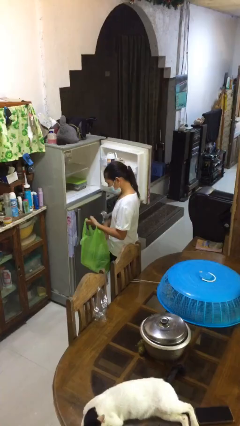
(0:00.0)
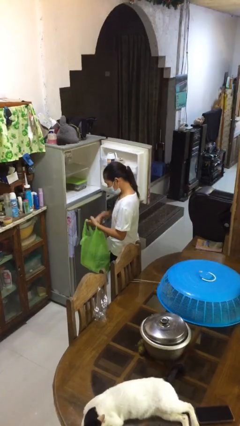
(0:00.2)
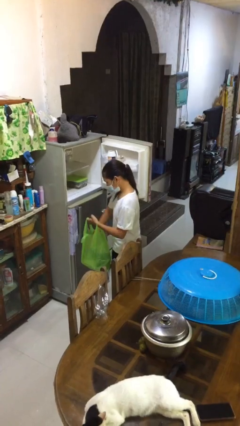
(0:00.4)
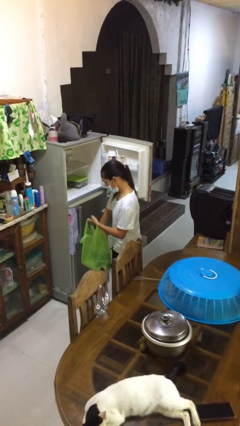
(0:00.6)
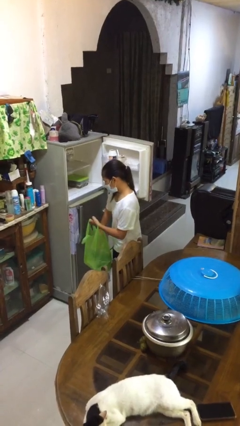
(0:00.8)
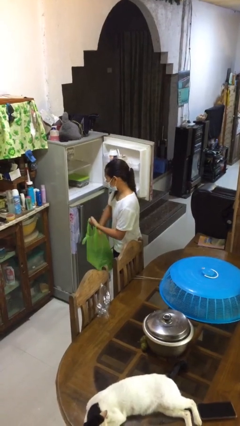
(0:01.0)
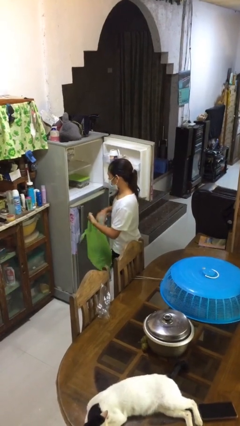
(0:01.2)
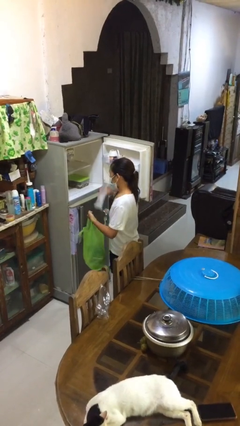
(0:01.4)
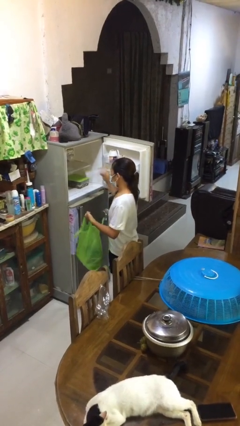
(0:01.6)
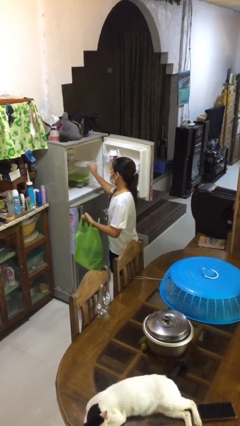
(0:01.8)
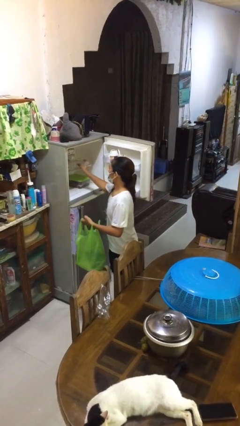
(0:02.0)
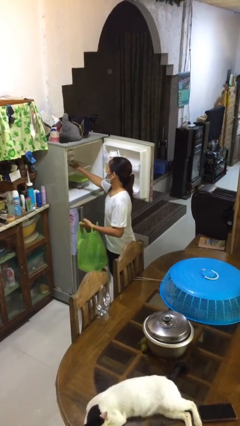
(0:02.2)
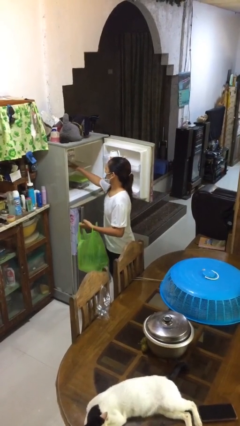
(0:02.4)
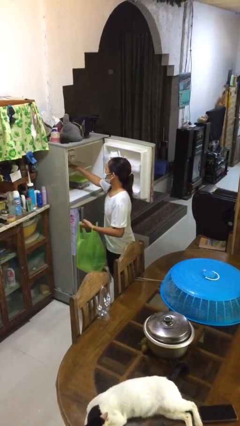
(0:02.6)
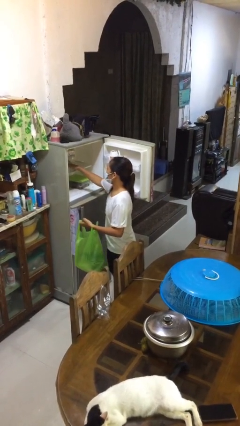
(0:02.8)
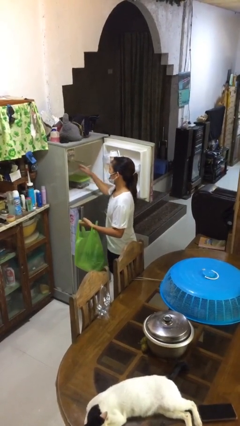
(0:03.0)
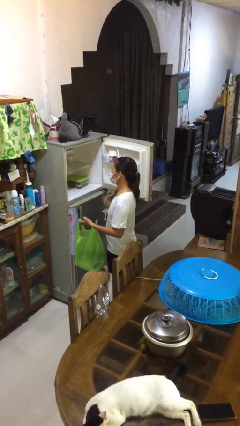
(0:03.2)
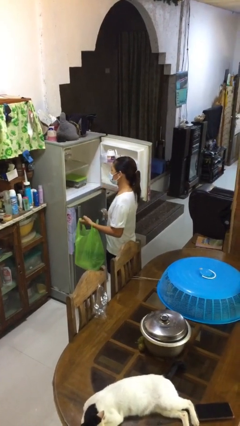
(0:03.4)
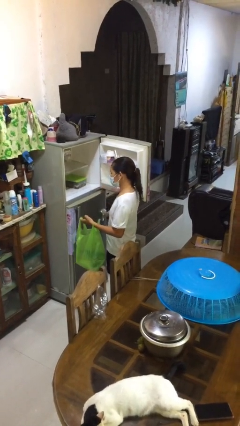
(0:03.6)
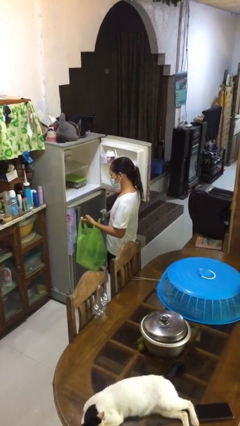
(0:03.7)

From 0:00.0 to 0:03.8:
person loads groceries into refrigerator

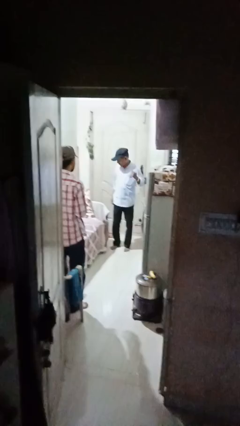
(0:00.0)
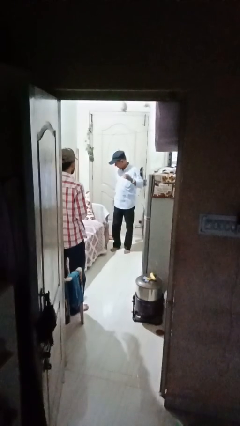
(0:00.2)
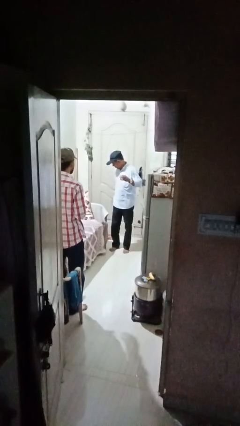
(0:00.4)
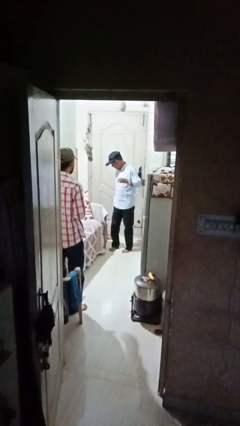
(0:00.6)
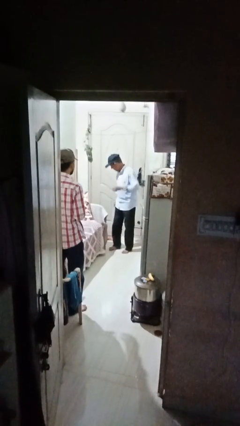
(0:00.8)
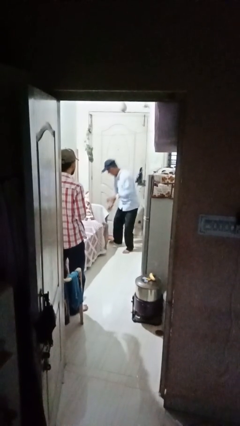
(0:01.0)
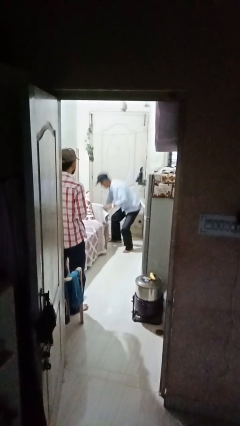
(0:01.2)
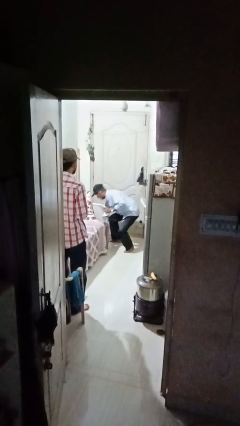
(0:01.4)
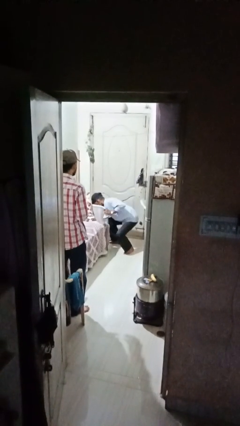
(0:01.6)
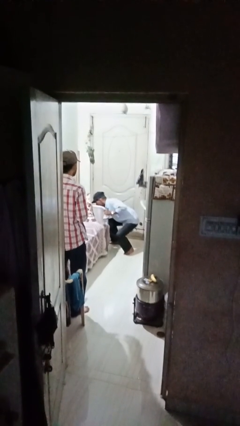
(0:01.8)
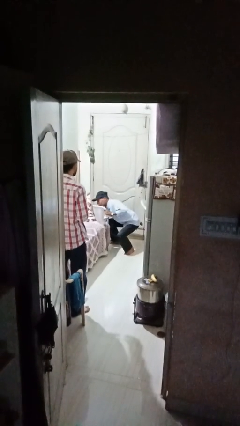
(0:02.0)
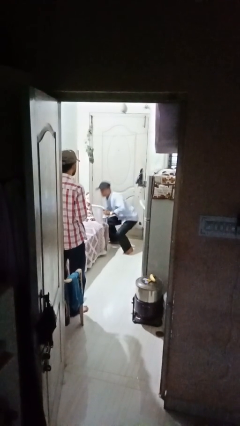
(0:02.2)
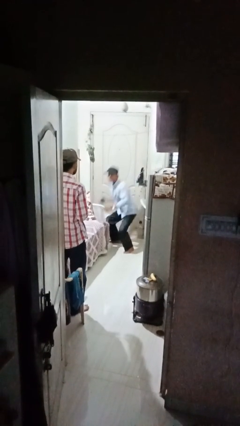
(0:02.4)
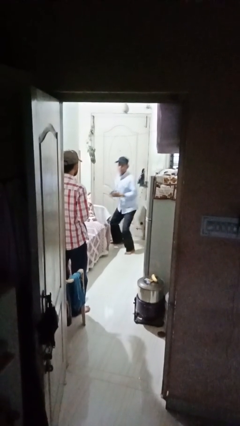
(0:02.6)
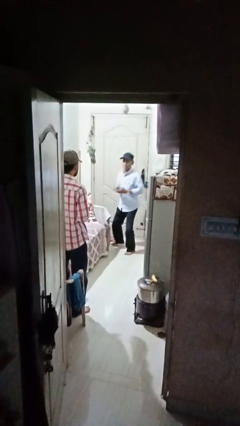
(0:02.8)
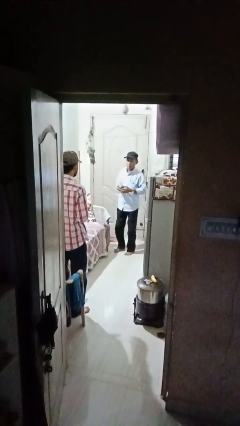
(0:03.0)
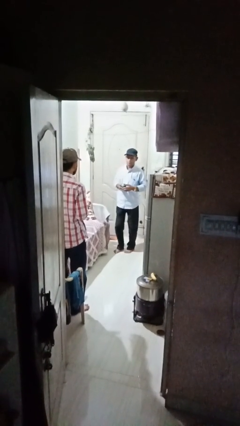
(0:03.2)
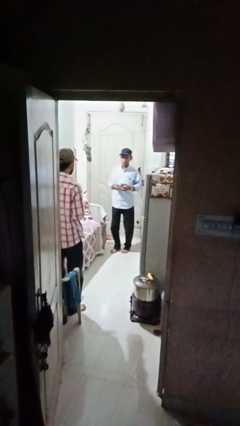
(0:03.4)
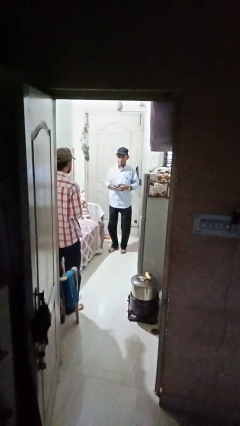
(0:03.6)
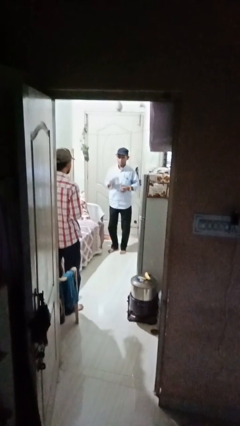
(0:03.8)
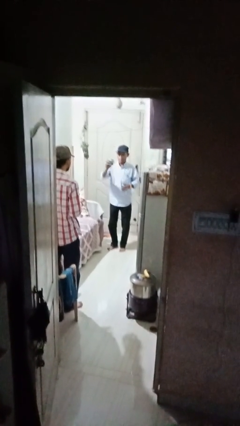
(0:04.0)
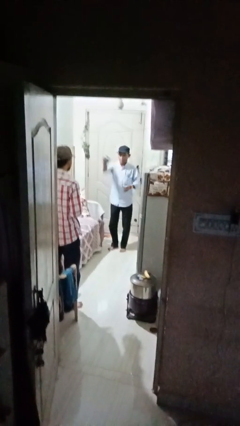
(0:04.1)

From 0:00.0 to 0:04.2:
person catches object from person

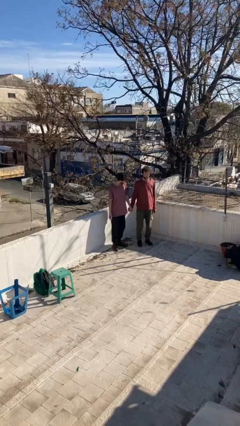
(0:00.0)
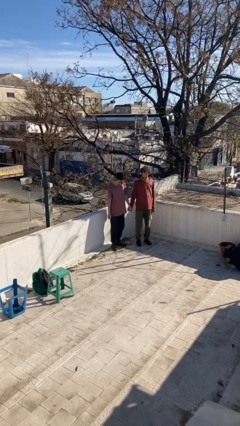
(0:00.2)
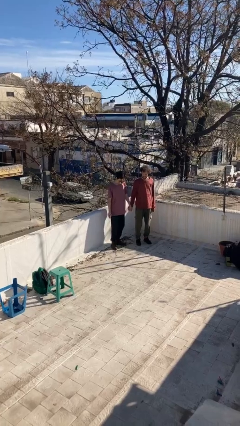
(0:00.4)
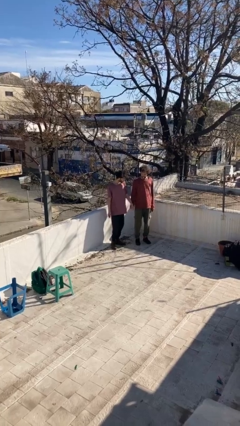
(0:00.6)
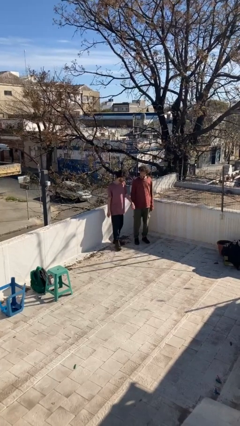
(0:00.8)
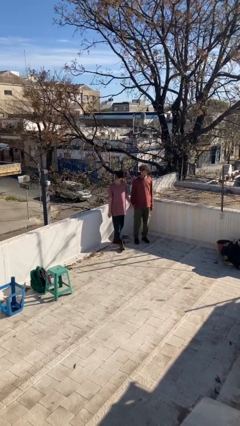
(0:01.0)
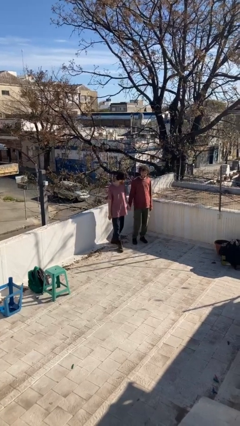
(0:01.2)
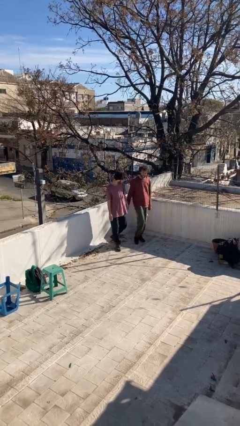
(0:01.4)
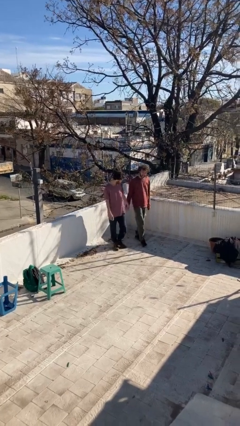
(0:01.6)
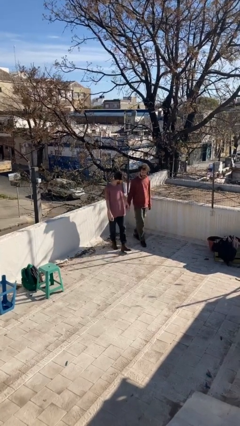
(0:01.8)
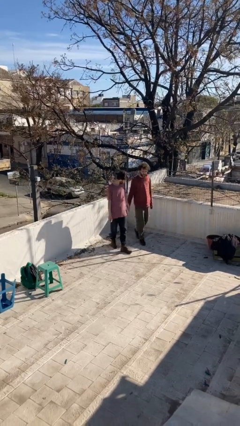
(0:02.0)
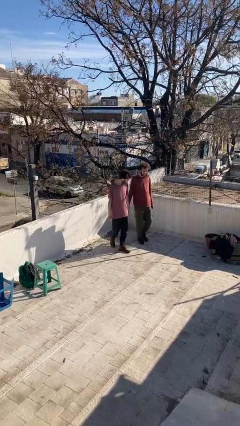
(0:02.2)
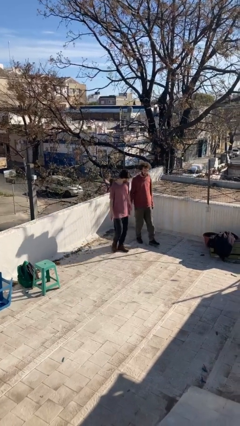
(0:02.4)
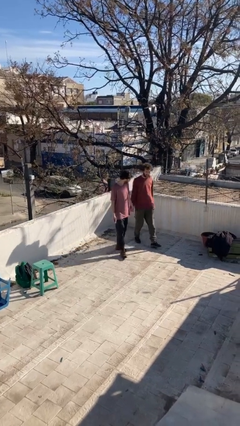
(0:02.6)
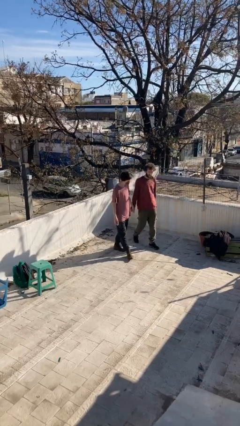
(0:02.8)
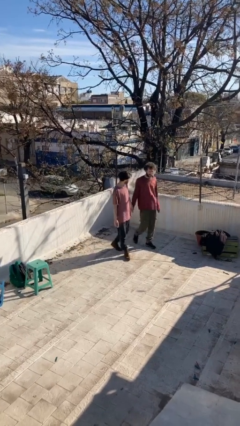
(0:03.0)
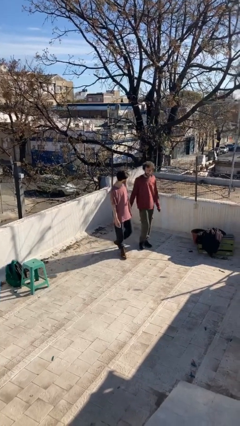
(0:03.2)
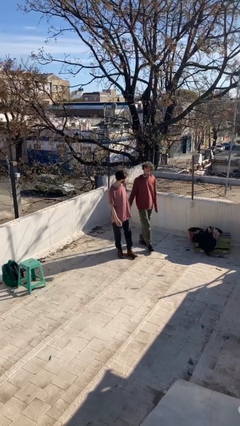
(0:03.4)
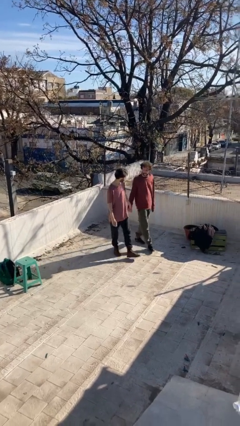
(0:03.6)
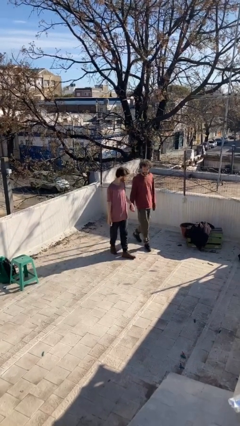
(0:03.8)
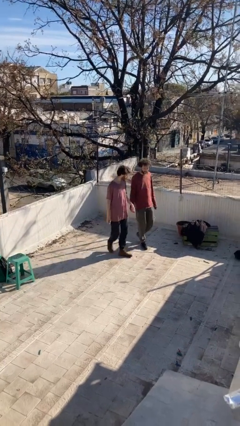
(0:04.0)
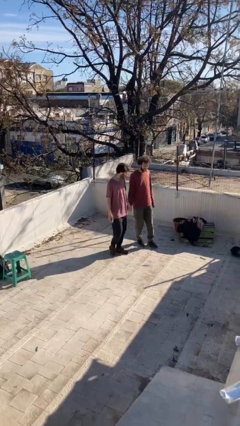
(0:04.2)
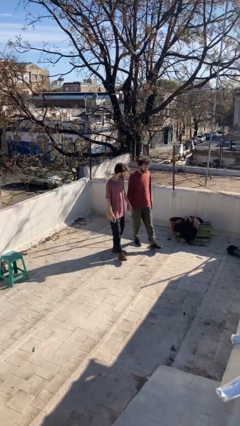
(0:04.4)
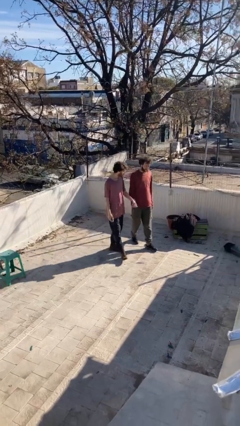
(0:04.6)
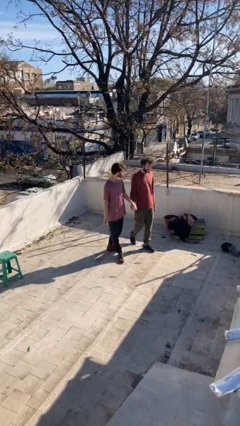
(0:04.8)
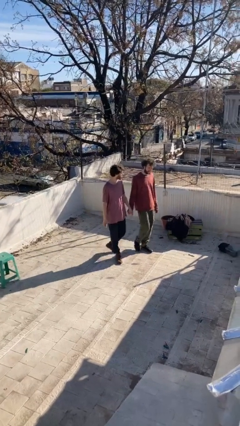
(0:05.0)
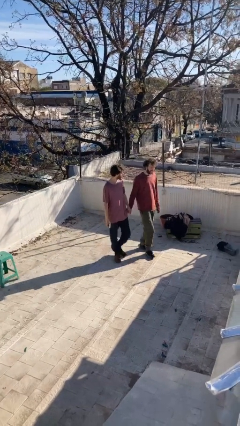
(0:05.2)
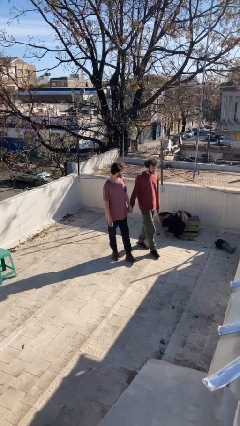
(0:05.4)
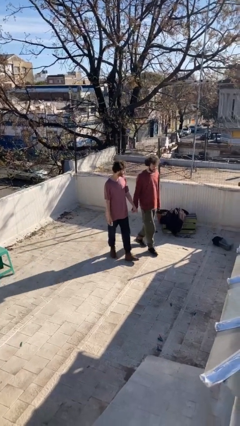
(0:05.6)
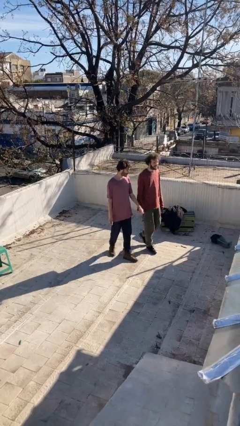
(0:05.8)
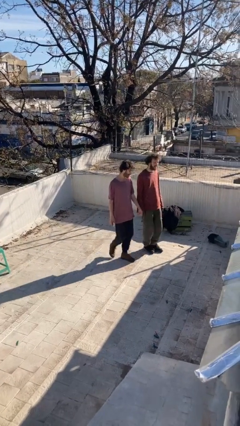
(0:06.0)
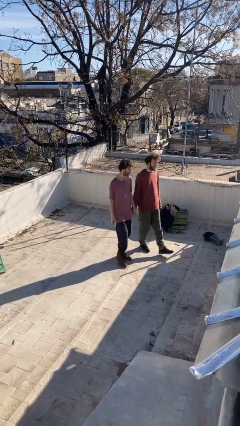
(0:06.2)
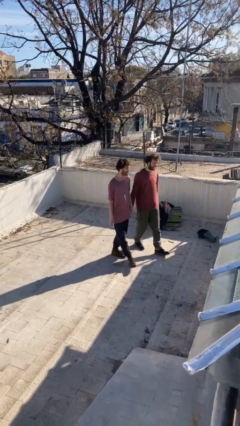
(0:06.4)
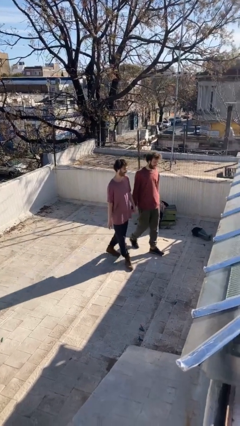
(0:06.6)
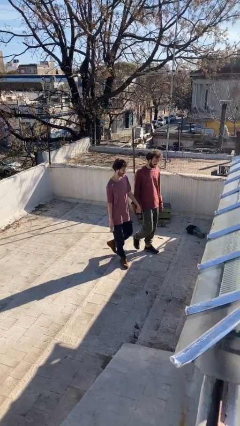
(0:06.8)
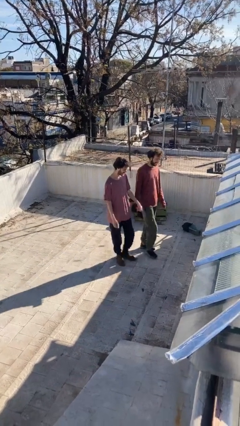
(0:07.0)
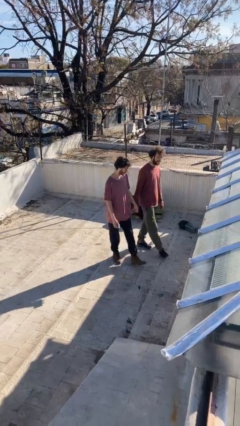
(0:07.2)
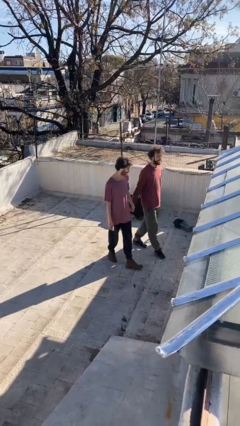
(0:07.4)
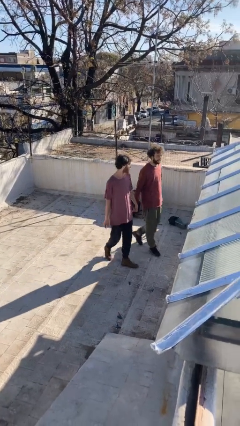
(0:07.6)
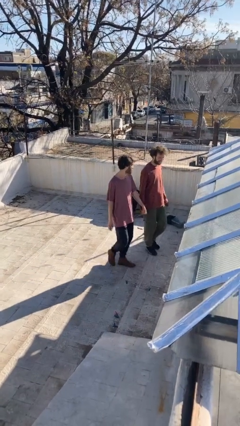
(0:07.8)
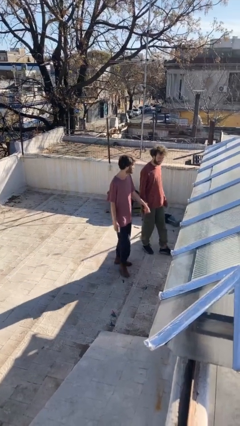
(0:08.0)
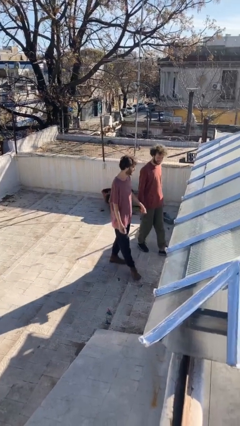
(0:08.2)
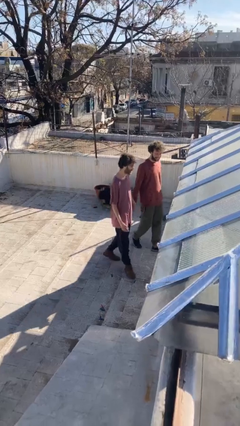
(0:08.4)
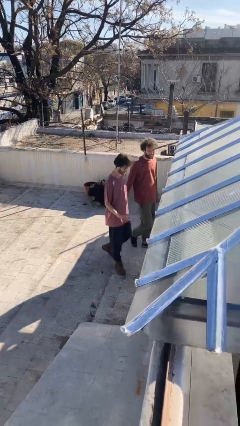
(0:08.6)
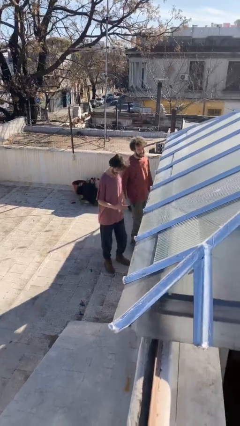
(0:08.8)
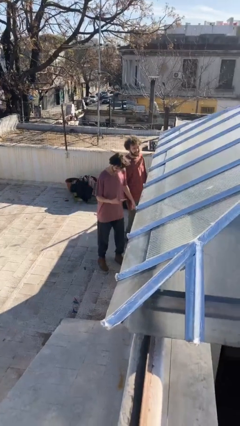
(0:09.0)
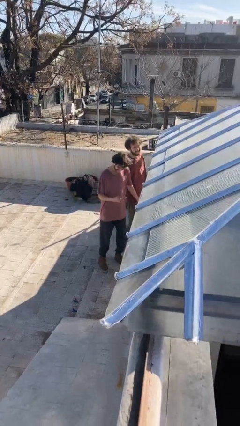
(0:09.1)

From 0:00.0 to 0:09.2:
person holds hand

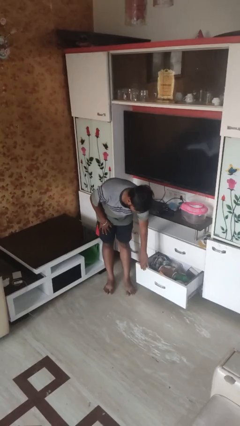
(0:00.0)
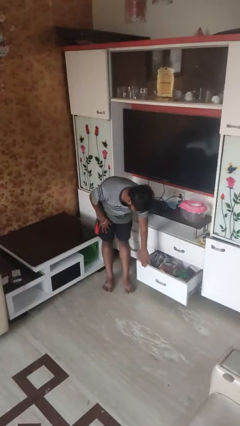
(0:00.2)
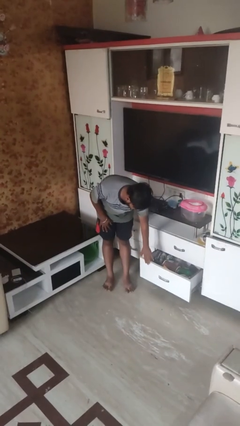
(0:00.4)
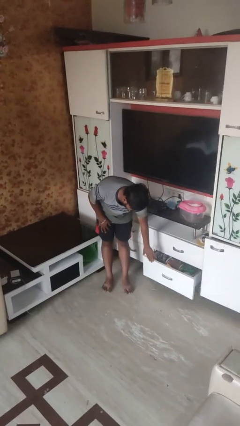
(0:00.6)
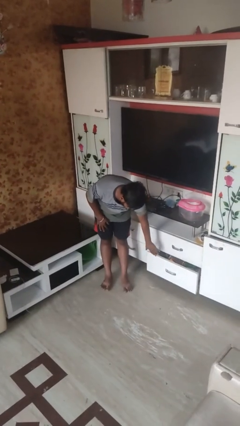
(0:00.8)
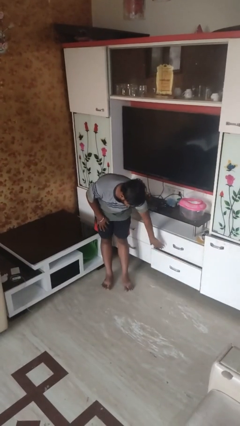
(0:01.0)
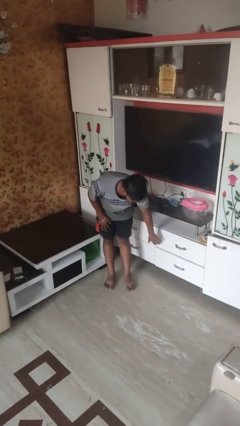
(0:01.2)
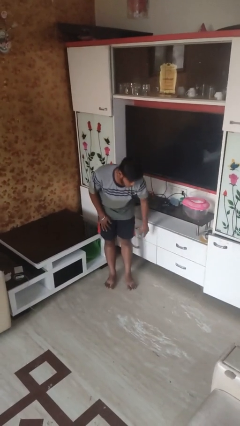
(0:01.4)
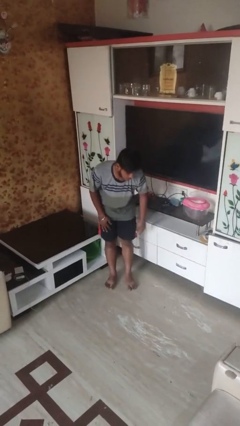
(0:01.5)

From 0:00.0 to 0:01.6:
person closes dresser drawer
